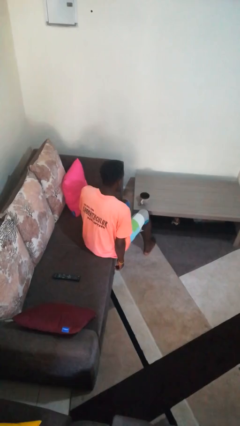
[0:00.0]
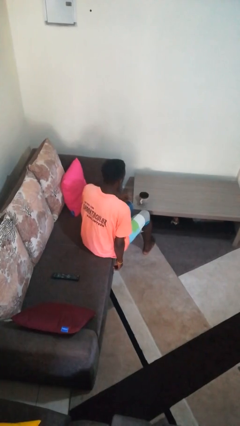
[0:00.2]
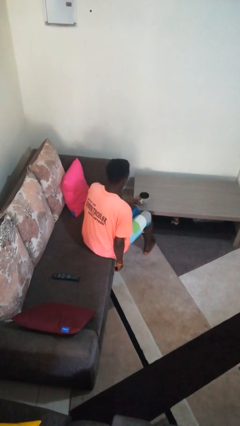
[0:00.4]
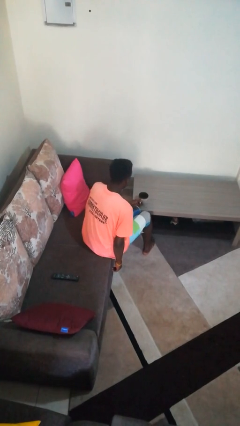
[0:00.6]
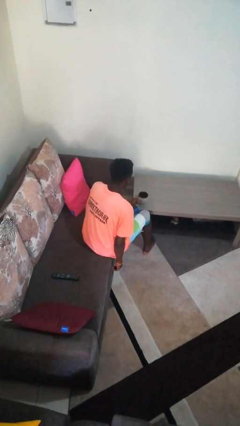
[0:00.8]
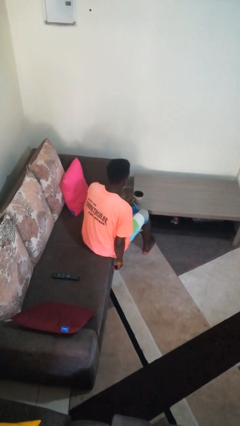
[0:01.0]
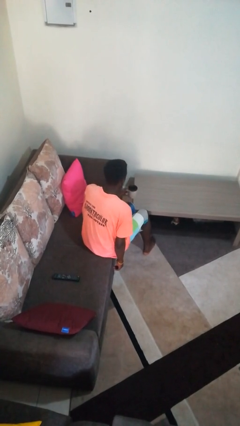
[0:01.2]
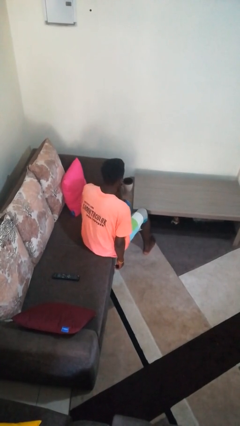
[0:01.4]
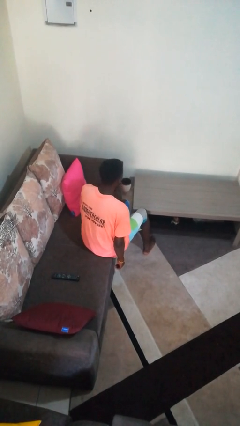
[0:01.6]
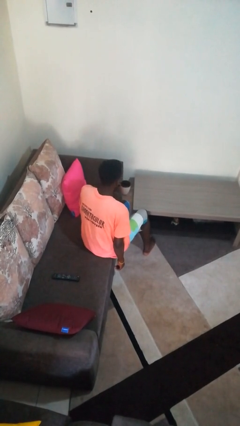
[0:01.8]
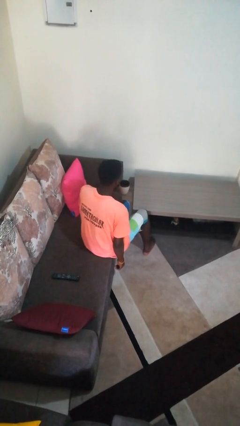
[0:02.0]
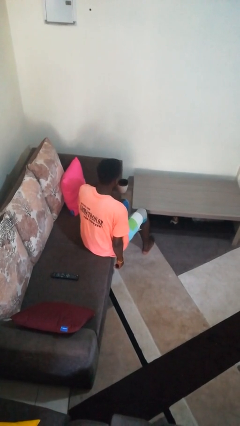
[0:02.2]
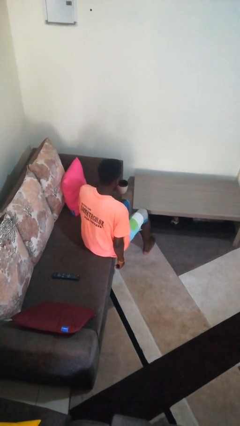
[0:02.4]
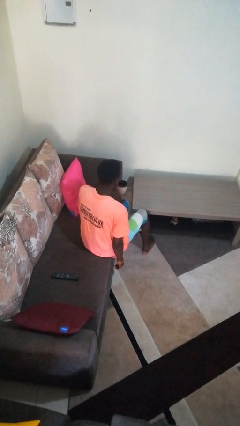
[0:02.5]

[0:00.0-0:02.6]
person picks up object from table

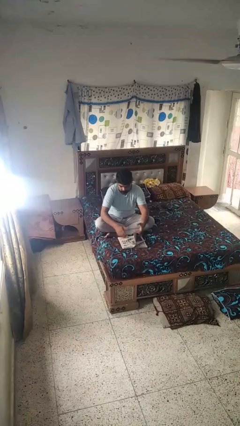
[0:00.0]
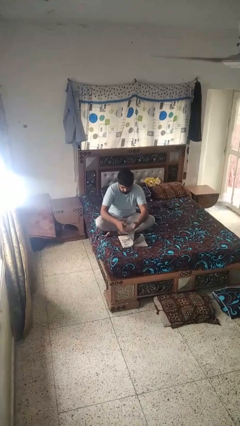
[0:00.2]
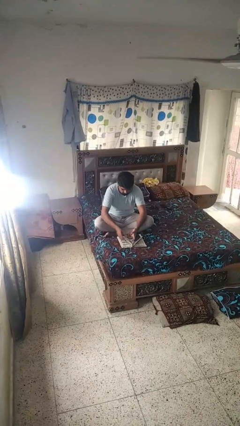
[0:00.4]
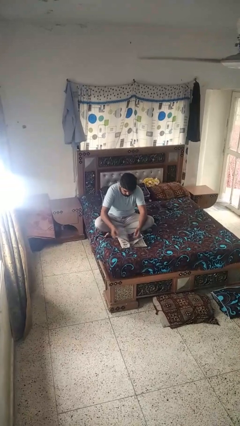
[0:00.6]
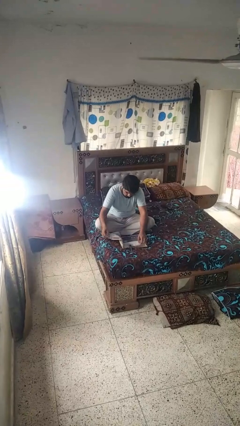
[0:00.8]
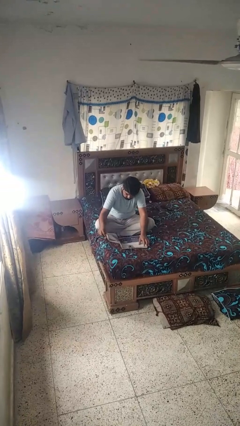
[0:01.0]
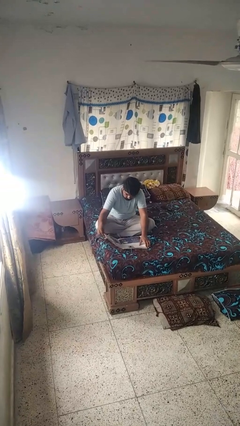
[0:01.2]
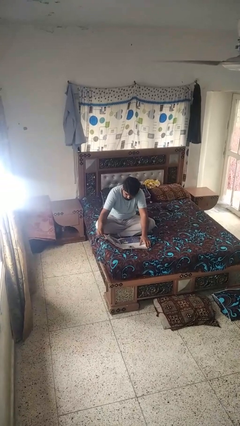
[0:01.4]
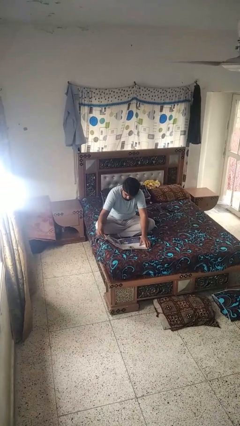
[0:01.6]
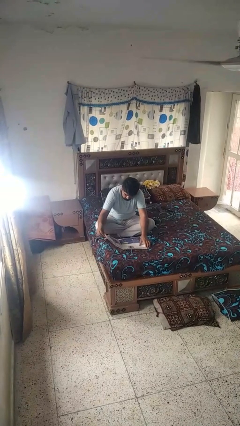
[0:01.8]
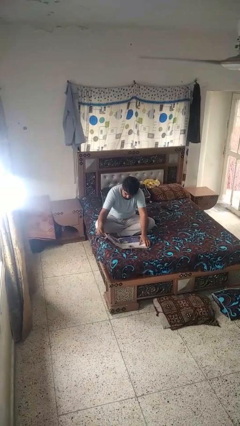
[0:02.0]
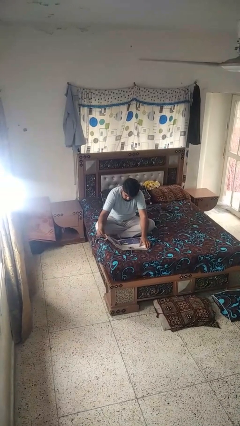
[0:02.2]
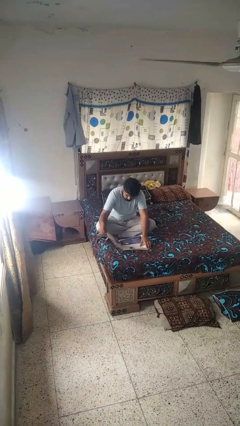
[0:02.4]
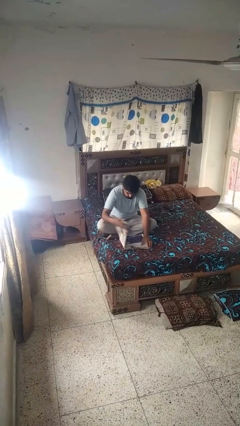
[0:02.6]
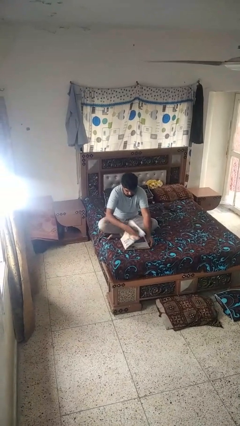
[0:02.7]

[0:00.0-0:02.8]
person reads magazine

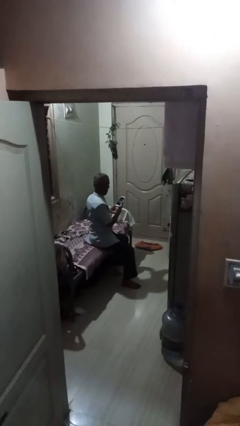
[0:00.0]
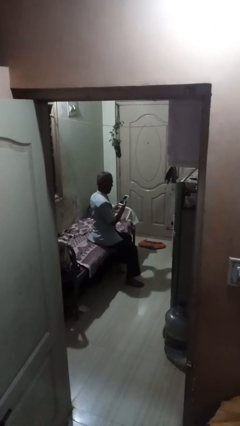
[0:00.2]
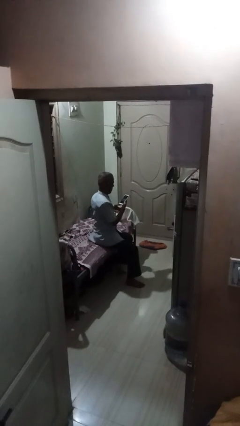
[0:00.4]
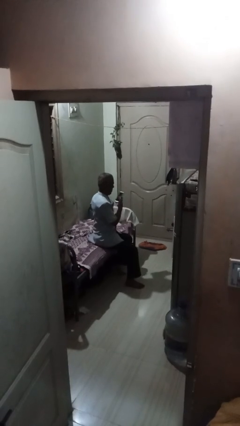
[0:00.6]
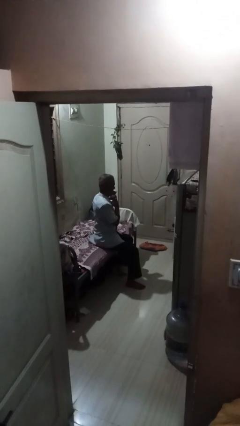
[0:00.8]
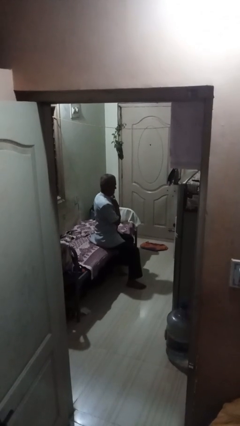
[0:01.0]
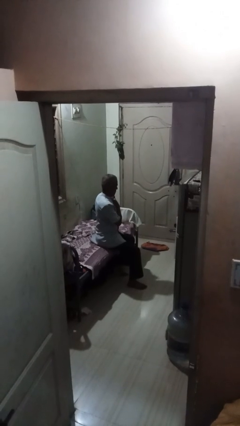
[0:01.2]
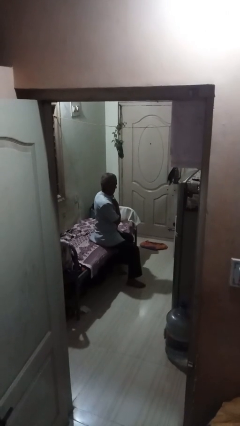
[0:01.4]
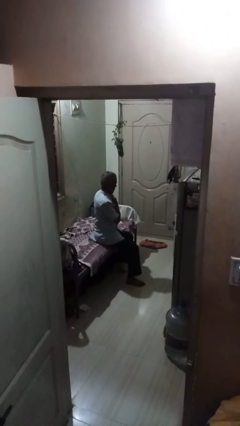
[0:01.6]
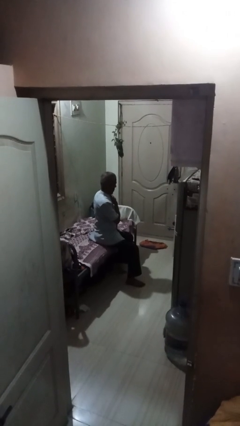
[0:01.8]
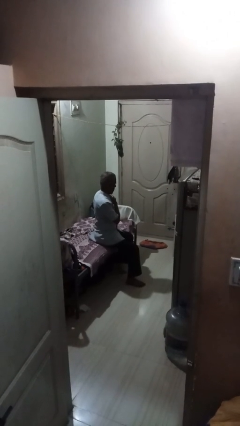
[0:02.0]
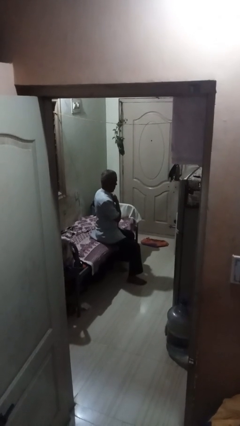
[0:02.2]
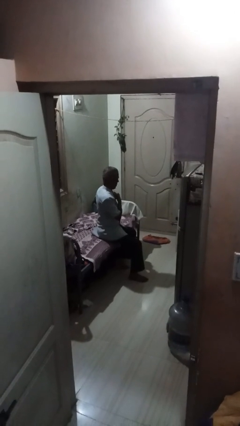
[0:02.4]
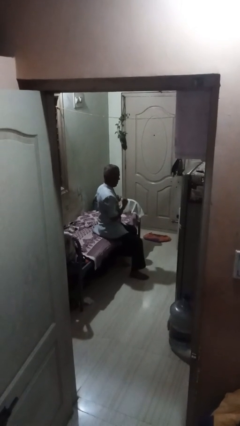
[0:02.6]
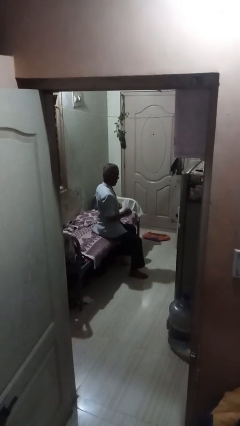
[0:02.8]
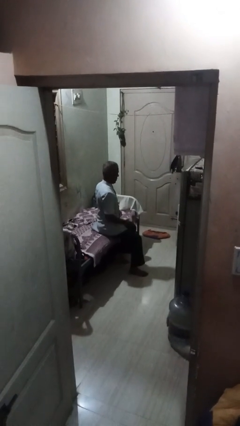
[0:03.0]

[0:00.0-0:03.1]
person puts phone into pocket

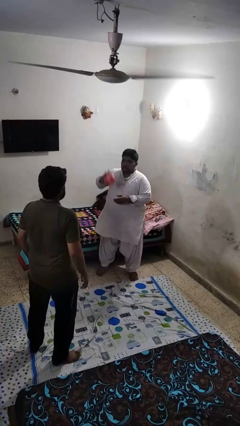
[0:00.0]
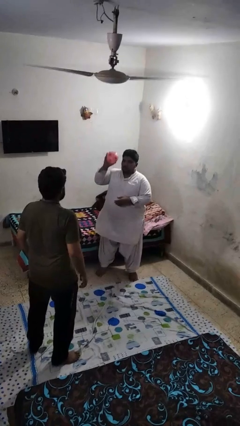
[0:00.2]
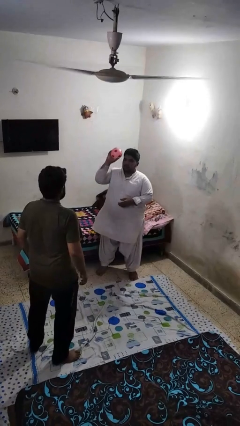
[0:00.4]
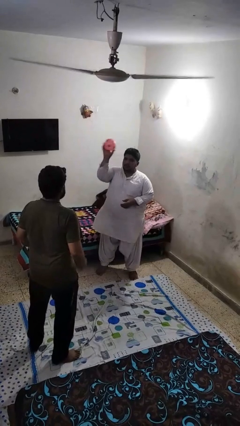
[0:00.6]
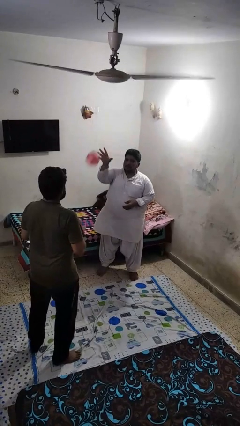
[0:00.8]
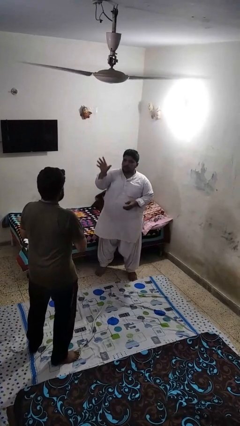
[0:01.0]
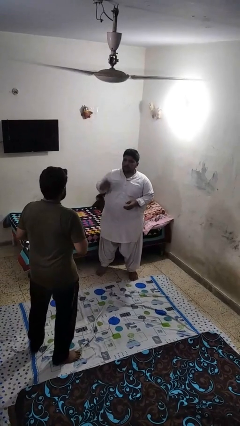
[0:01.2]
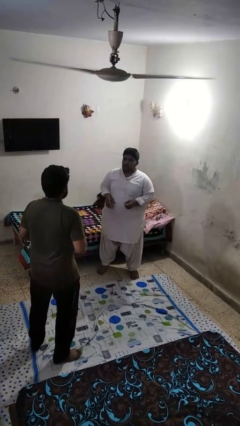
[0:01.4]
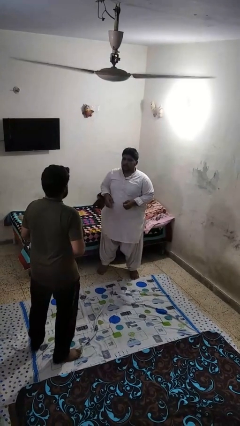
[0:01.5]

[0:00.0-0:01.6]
person throws object to person

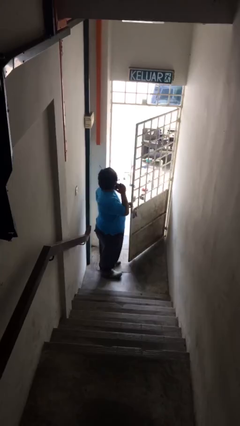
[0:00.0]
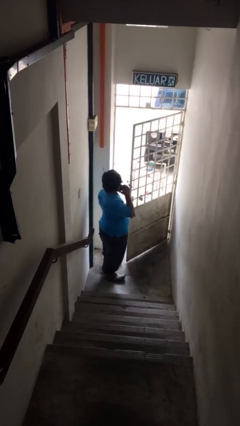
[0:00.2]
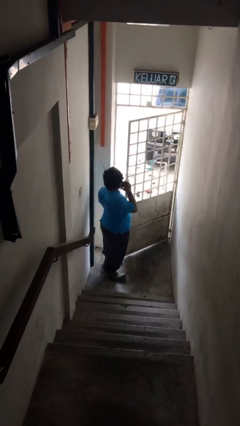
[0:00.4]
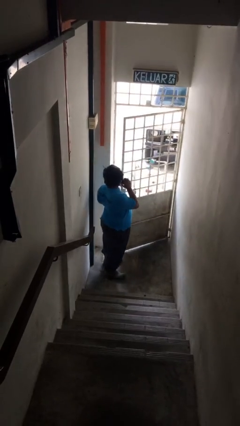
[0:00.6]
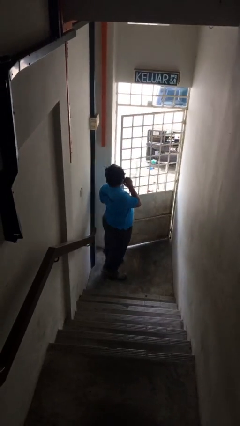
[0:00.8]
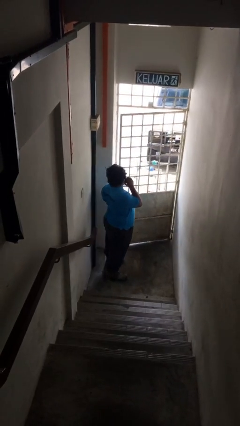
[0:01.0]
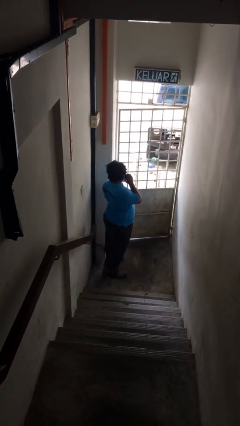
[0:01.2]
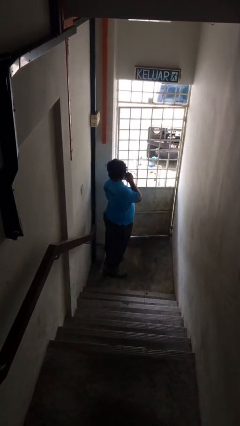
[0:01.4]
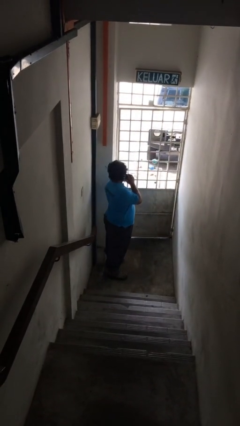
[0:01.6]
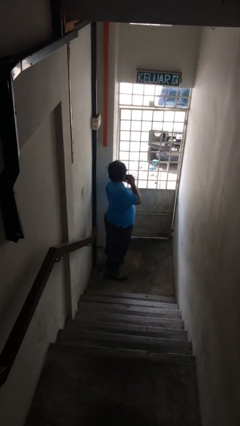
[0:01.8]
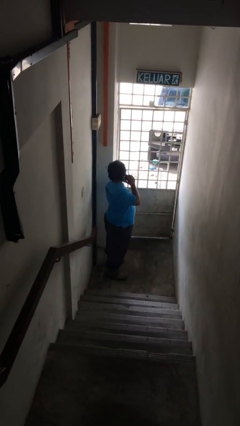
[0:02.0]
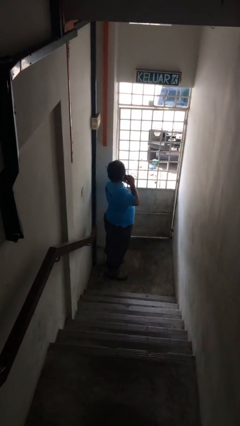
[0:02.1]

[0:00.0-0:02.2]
person closes facility door

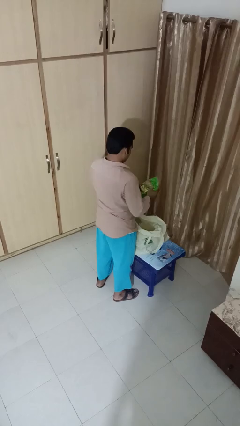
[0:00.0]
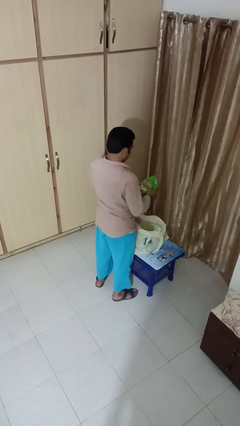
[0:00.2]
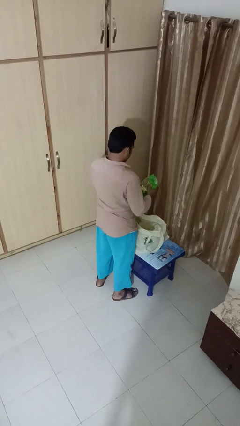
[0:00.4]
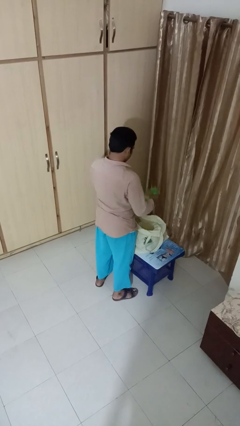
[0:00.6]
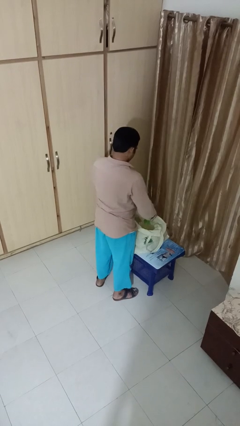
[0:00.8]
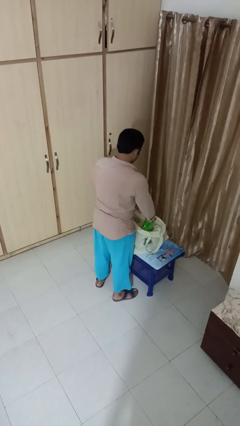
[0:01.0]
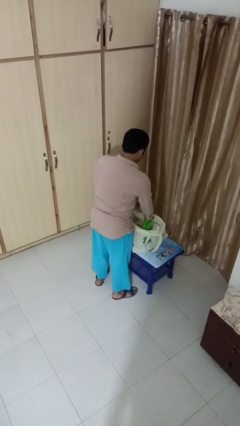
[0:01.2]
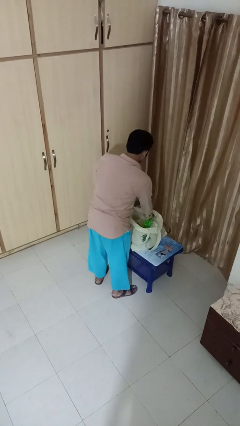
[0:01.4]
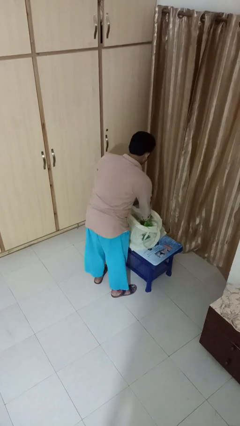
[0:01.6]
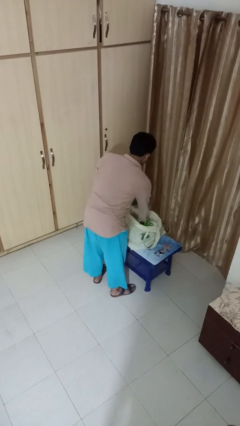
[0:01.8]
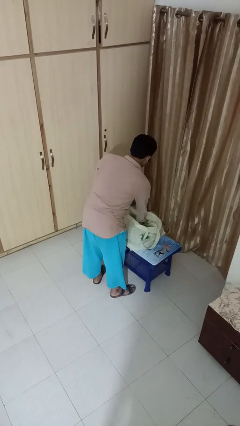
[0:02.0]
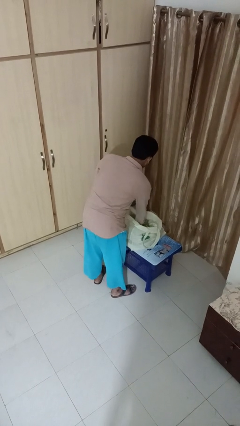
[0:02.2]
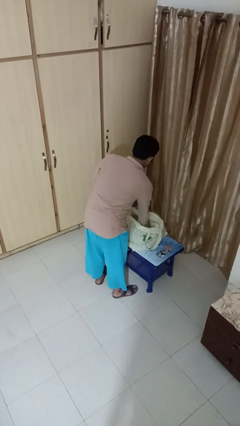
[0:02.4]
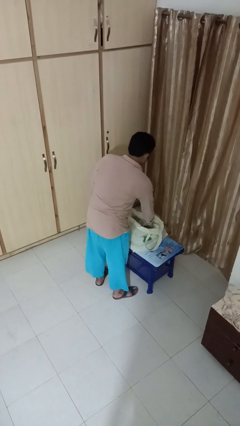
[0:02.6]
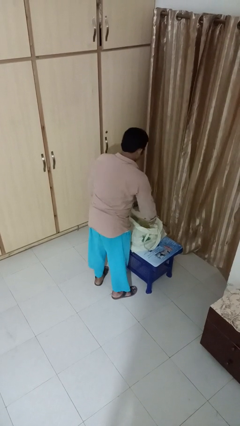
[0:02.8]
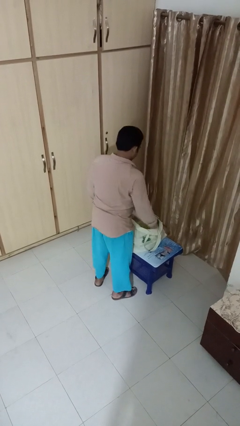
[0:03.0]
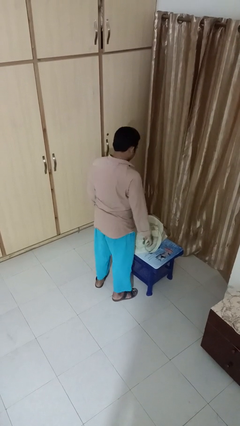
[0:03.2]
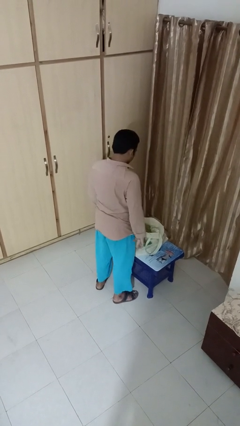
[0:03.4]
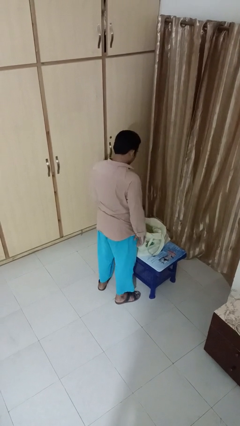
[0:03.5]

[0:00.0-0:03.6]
person puts object into bag

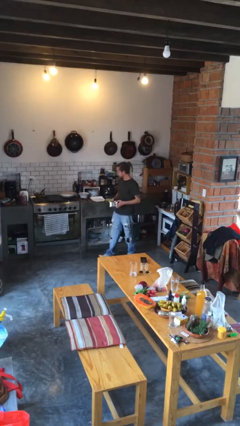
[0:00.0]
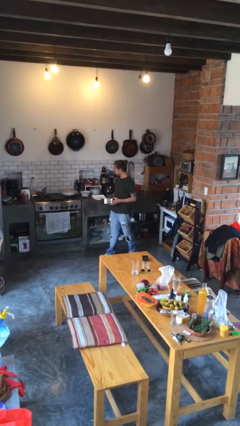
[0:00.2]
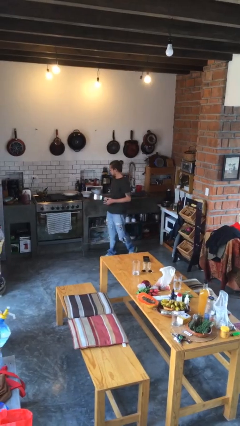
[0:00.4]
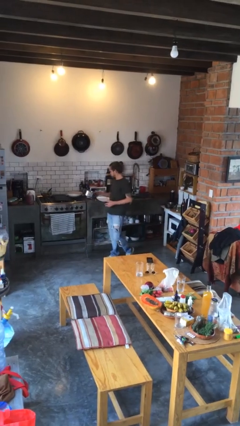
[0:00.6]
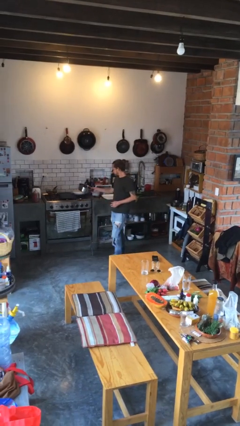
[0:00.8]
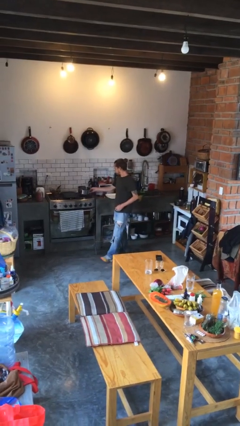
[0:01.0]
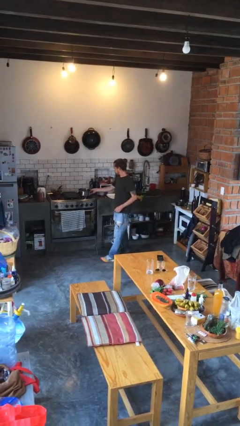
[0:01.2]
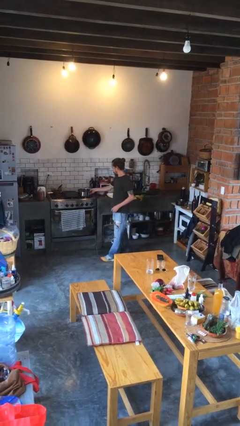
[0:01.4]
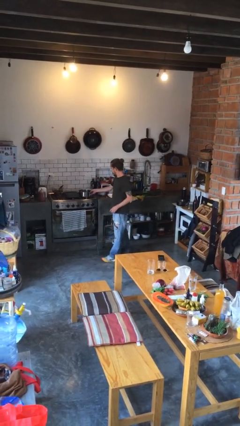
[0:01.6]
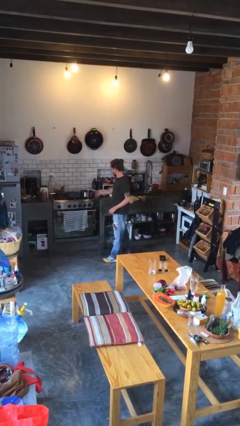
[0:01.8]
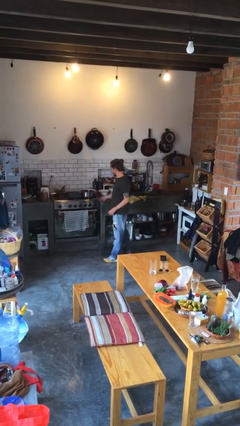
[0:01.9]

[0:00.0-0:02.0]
person puts down object on countertop
